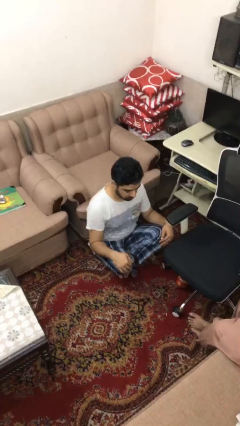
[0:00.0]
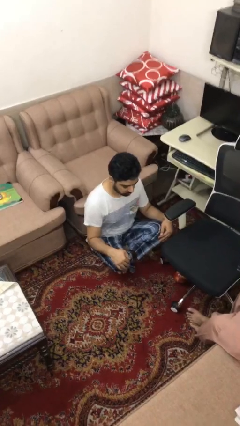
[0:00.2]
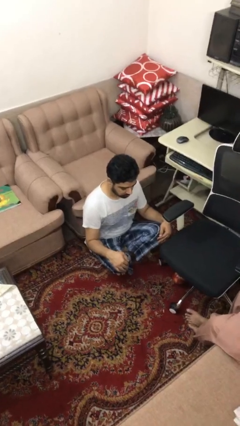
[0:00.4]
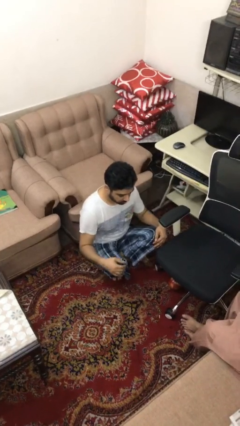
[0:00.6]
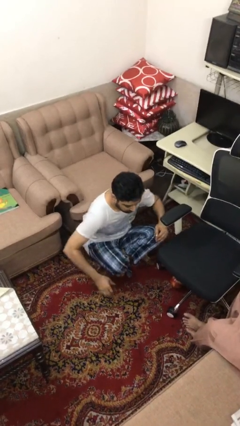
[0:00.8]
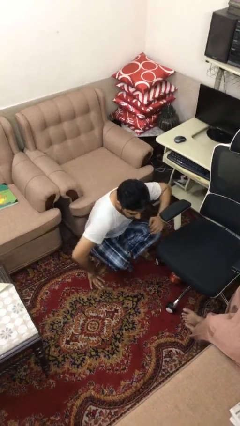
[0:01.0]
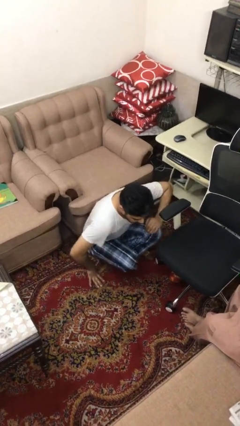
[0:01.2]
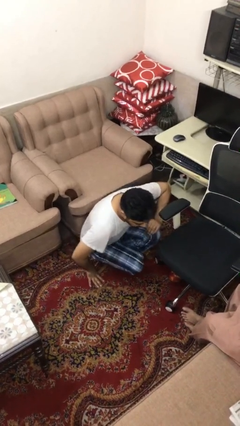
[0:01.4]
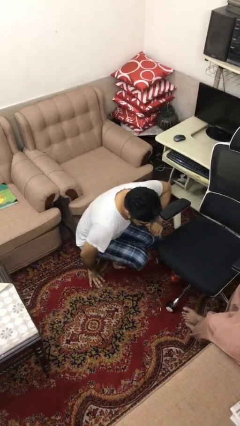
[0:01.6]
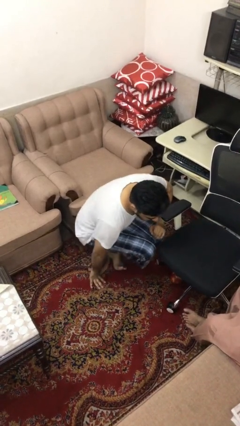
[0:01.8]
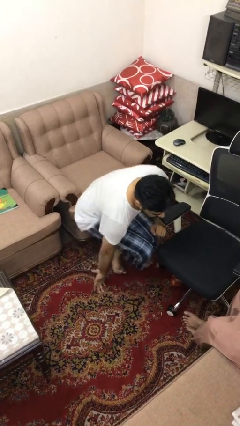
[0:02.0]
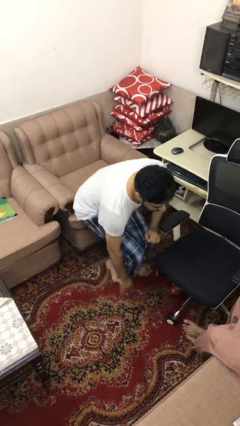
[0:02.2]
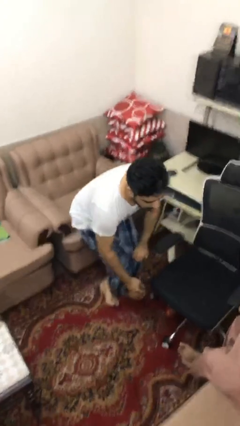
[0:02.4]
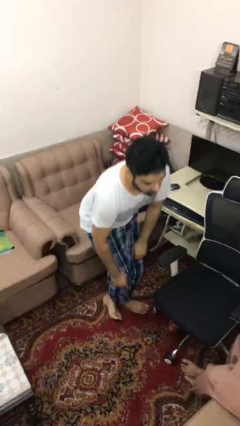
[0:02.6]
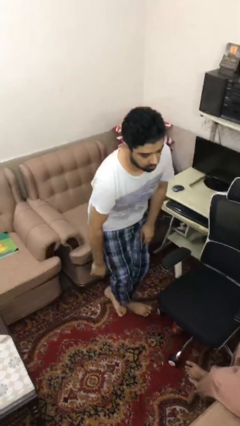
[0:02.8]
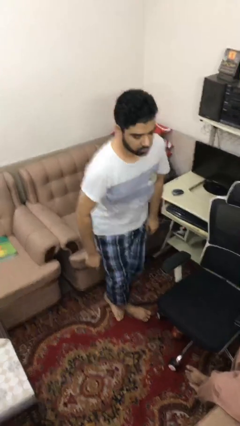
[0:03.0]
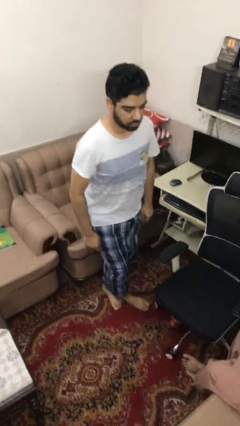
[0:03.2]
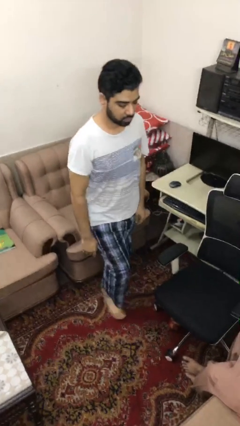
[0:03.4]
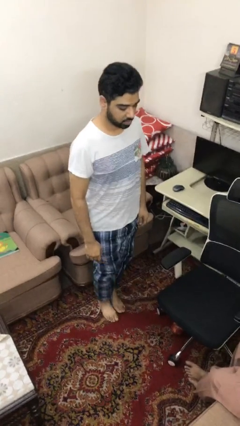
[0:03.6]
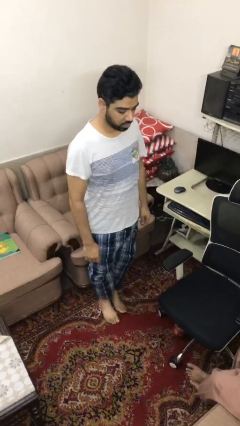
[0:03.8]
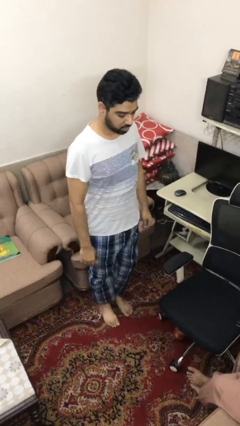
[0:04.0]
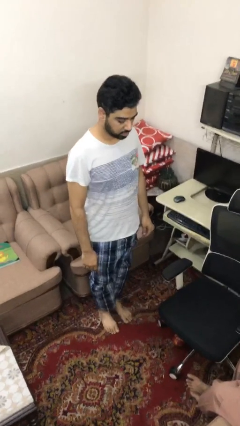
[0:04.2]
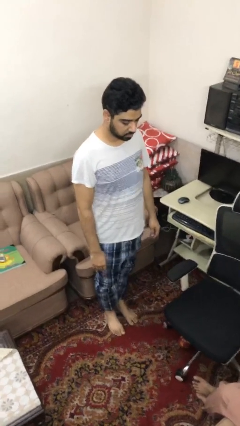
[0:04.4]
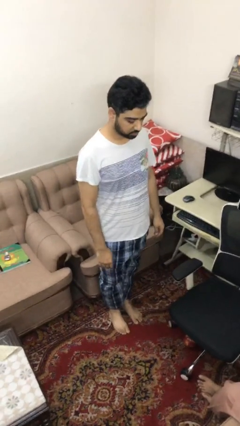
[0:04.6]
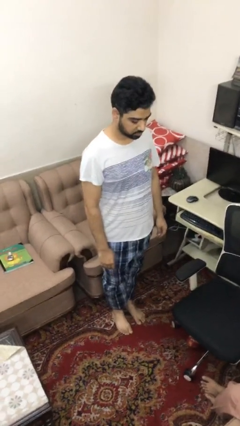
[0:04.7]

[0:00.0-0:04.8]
person stands up from floor

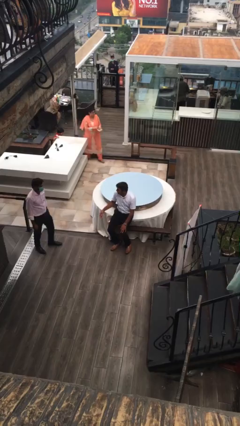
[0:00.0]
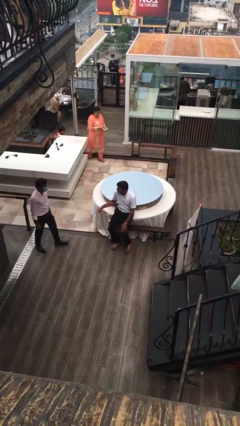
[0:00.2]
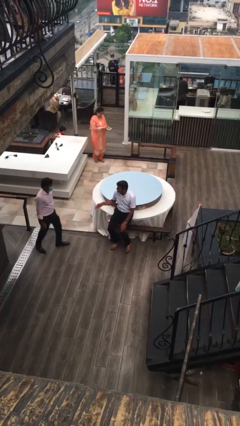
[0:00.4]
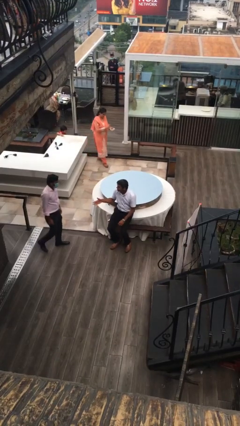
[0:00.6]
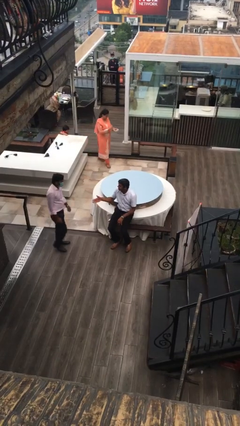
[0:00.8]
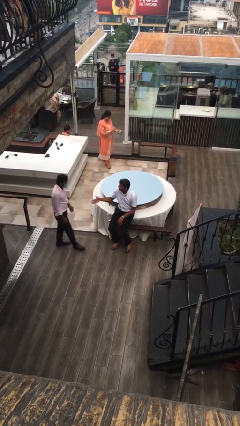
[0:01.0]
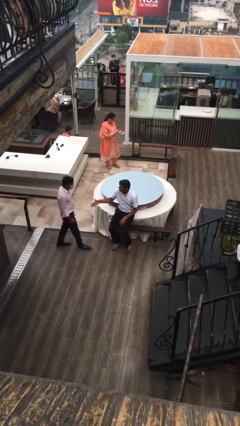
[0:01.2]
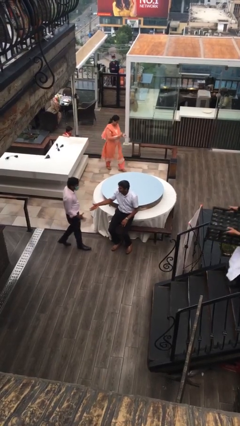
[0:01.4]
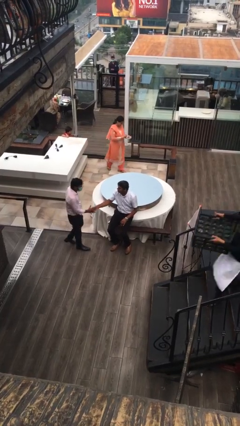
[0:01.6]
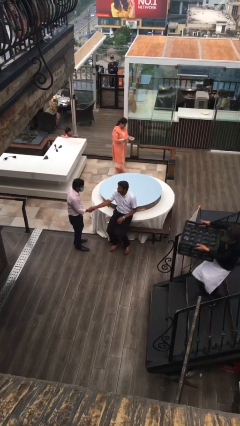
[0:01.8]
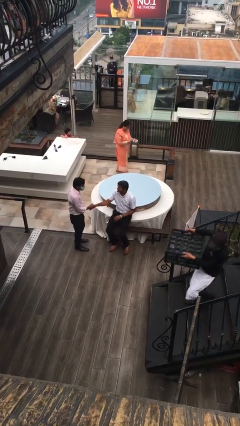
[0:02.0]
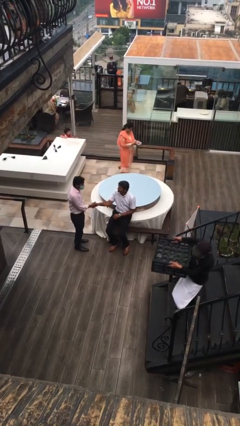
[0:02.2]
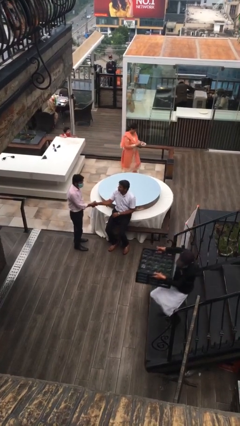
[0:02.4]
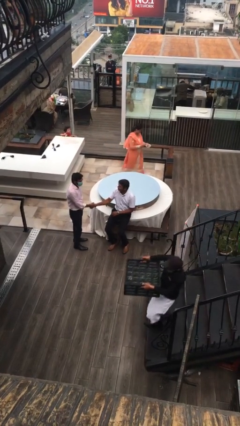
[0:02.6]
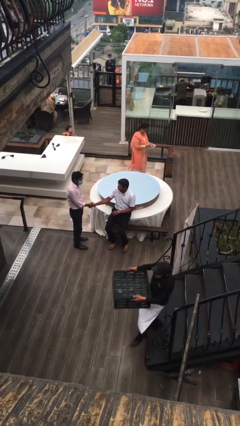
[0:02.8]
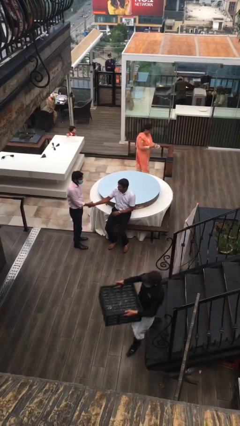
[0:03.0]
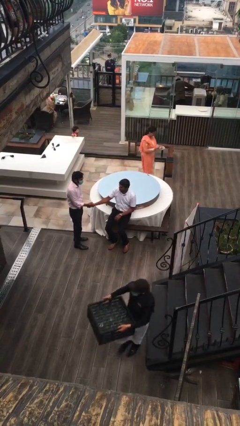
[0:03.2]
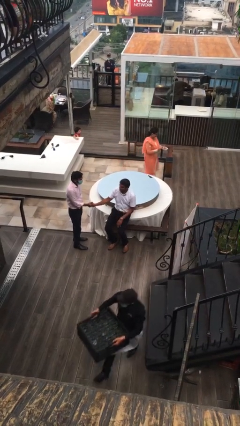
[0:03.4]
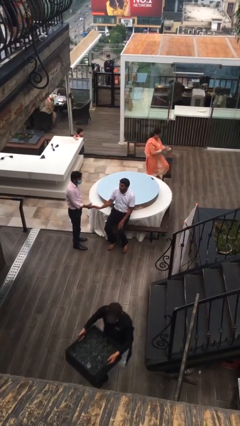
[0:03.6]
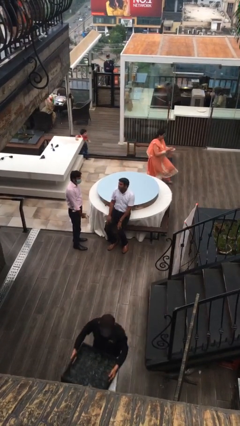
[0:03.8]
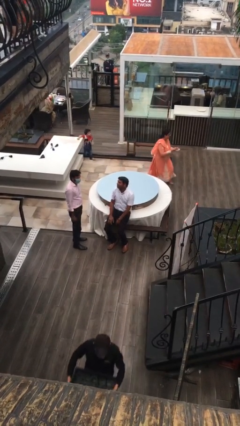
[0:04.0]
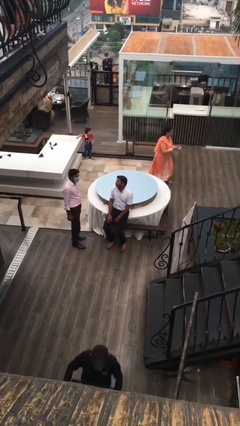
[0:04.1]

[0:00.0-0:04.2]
person shakes hand

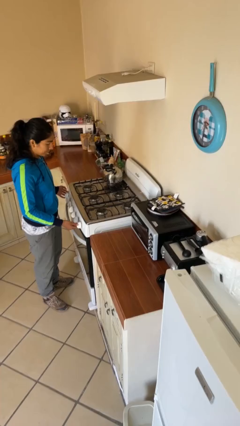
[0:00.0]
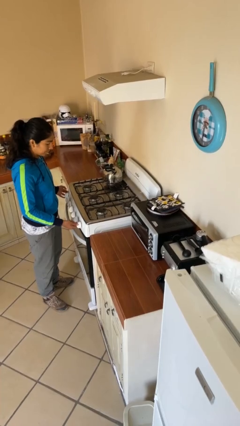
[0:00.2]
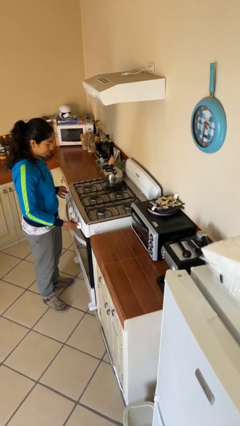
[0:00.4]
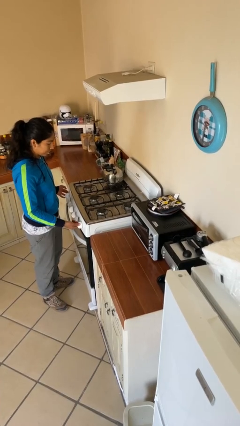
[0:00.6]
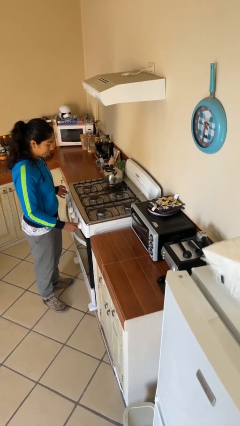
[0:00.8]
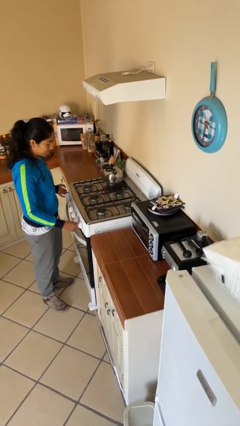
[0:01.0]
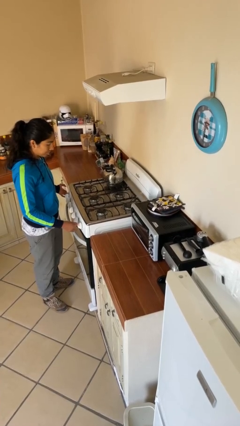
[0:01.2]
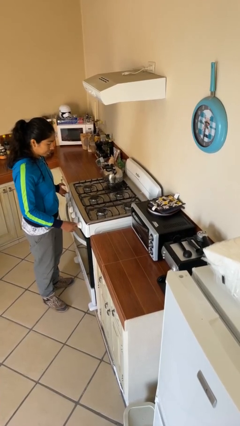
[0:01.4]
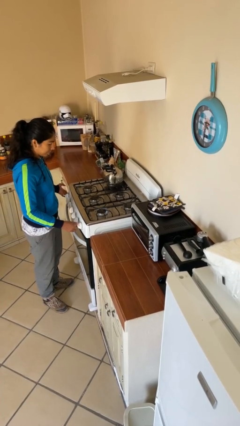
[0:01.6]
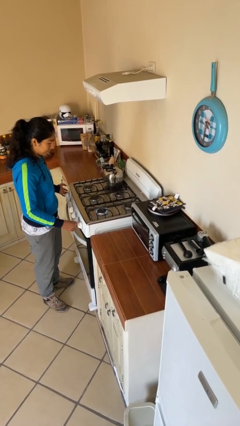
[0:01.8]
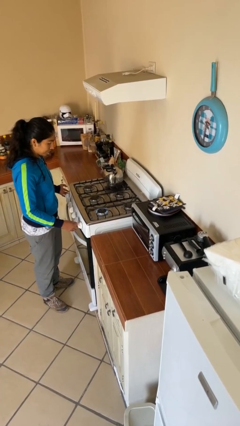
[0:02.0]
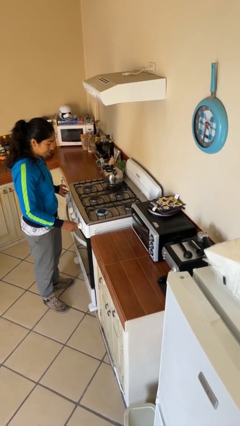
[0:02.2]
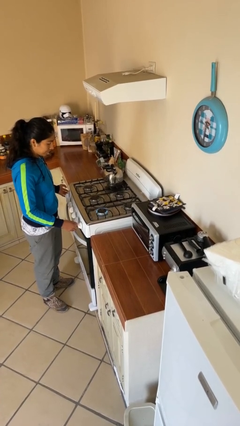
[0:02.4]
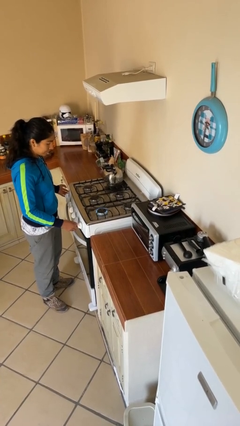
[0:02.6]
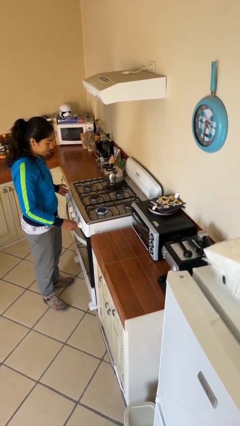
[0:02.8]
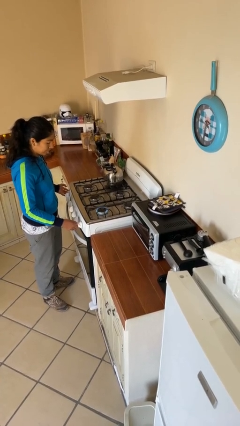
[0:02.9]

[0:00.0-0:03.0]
person turns on stovetop

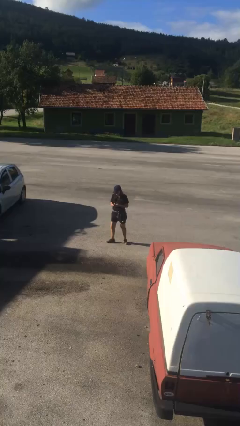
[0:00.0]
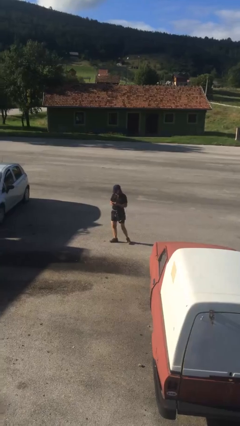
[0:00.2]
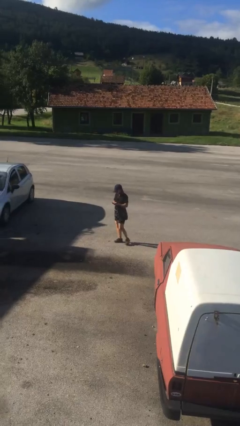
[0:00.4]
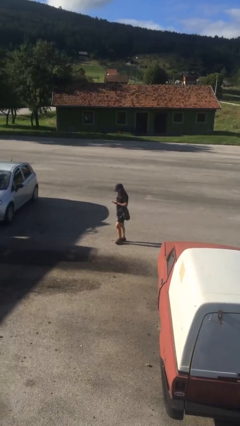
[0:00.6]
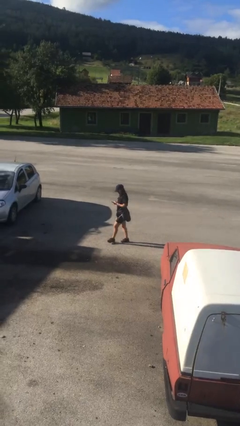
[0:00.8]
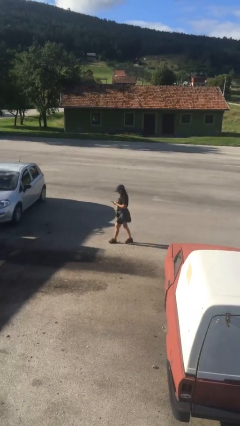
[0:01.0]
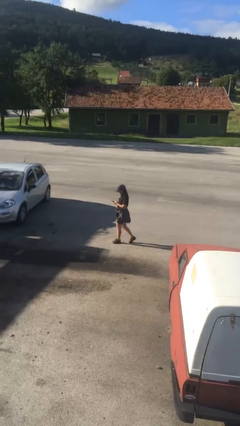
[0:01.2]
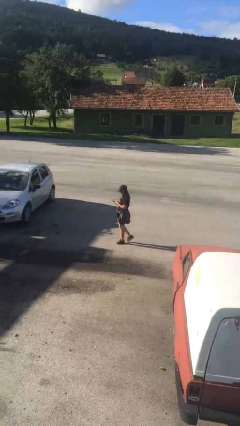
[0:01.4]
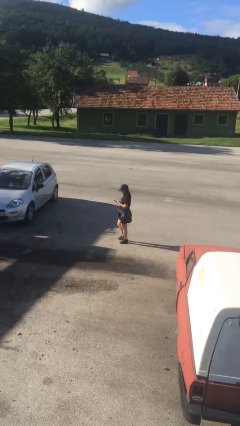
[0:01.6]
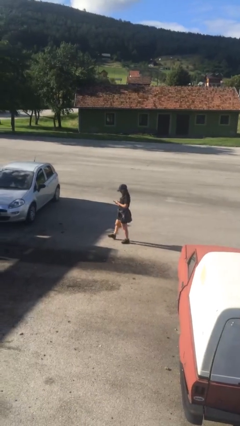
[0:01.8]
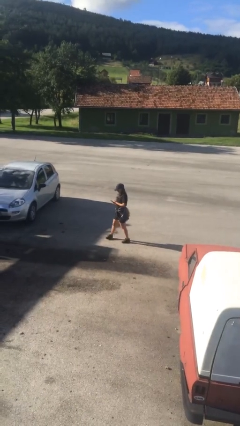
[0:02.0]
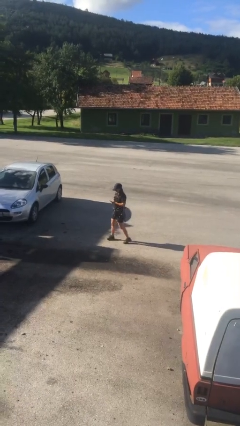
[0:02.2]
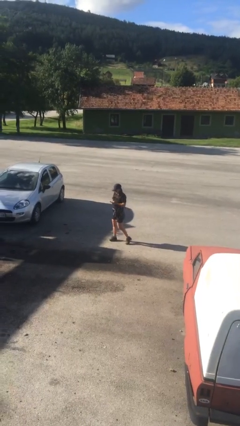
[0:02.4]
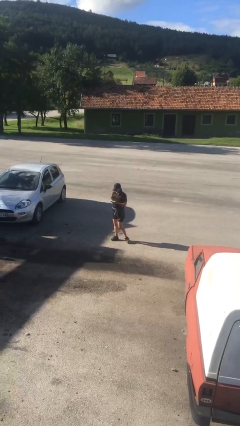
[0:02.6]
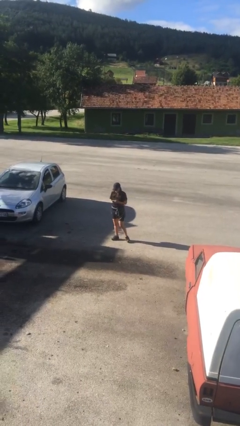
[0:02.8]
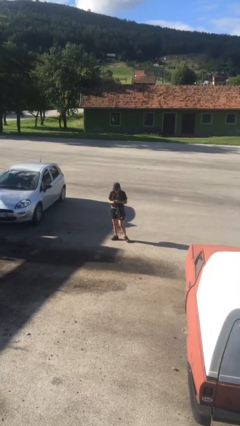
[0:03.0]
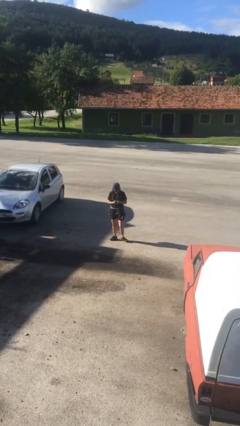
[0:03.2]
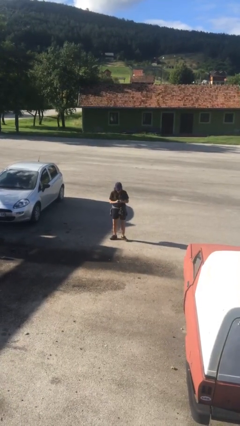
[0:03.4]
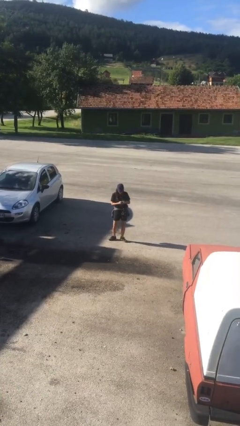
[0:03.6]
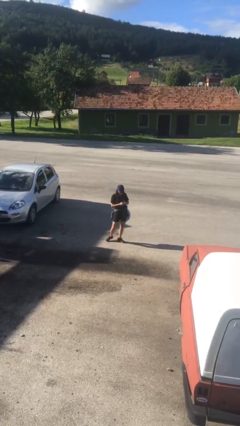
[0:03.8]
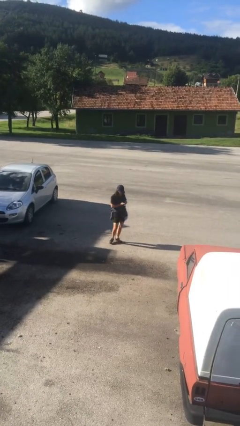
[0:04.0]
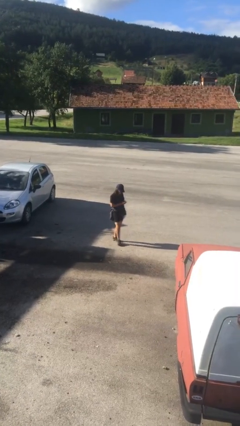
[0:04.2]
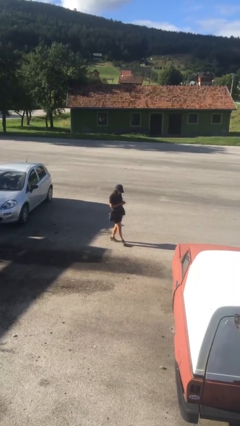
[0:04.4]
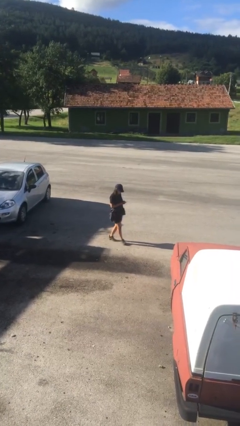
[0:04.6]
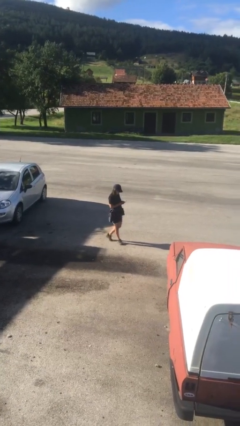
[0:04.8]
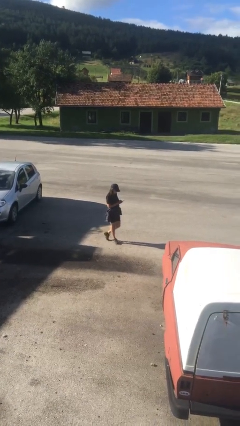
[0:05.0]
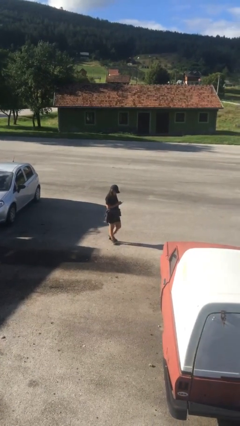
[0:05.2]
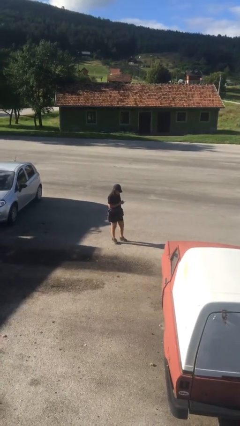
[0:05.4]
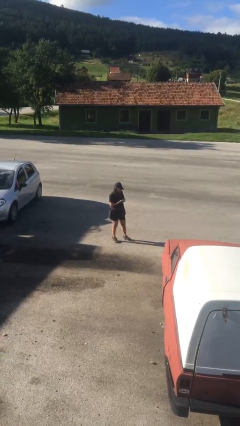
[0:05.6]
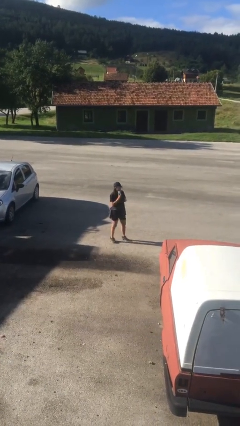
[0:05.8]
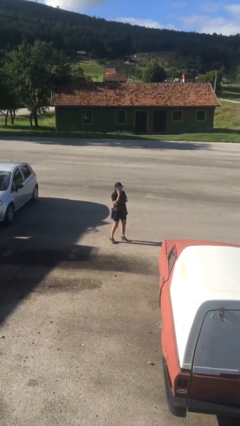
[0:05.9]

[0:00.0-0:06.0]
person texts on phone
